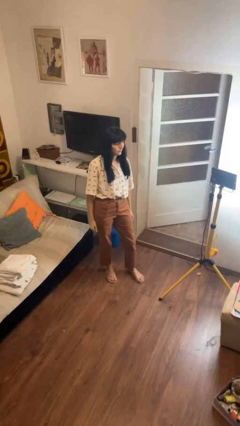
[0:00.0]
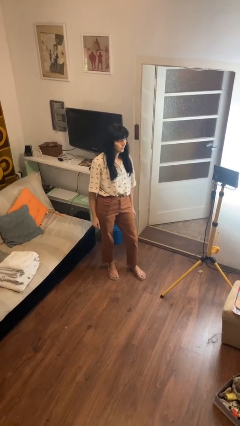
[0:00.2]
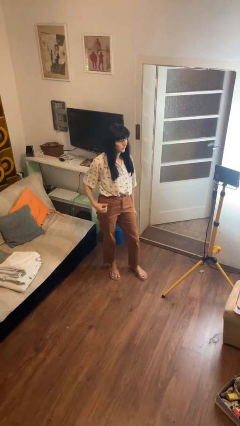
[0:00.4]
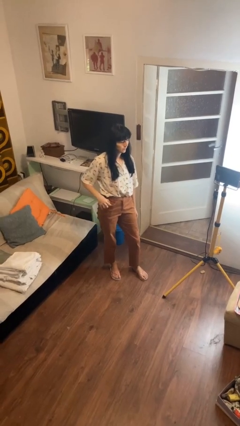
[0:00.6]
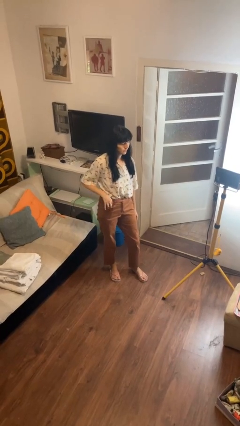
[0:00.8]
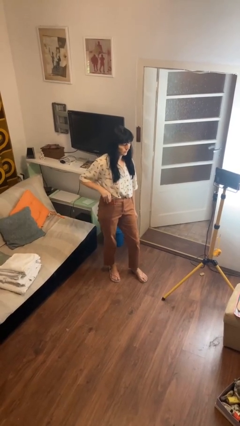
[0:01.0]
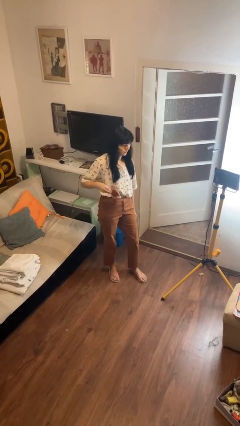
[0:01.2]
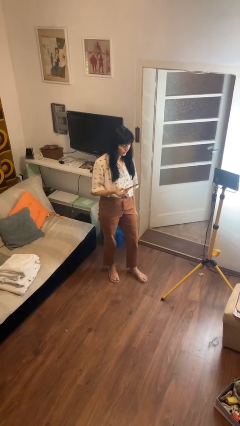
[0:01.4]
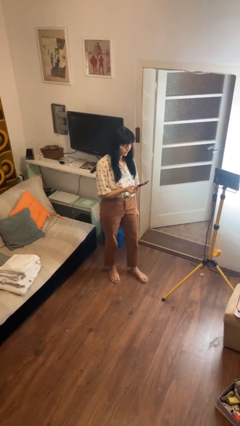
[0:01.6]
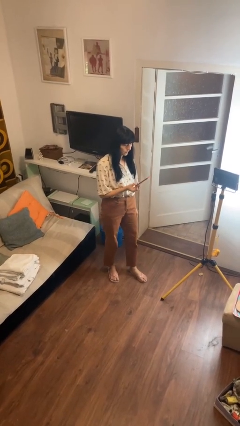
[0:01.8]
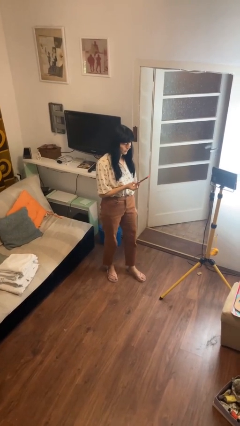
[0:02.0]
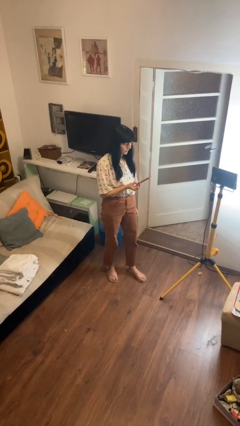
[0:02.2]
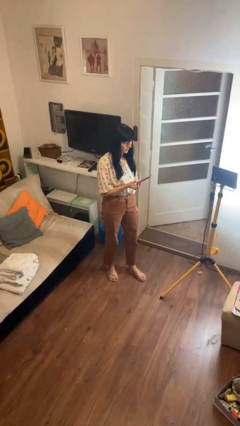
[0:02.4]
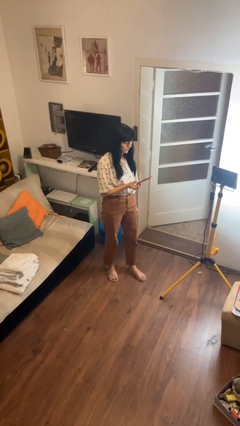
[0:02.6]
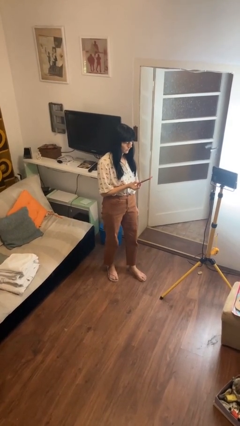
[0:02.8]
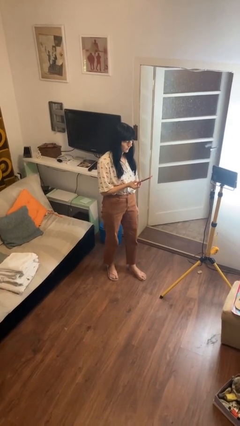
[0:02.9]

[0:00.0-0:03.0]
person takes phone from pocket

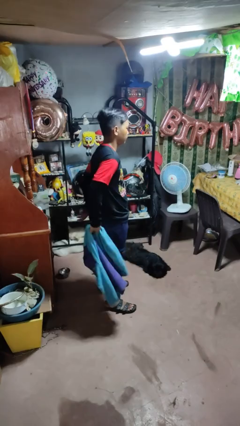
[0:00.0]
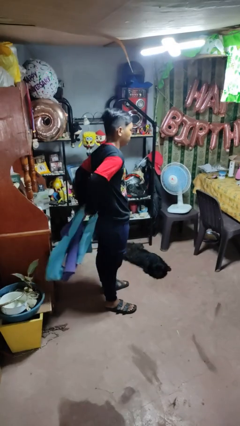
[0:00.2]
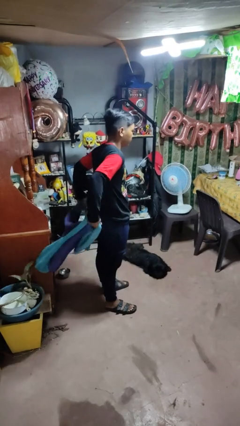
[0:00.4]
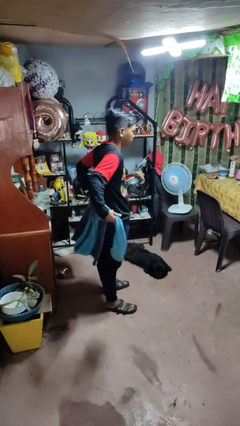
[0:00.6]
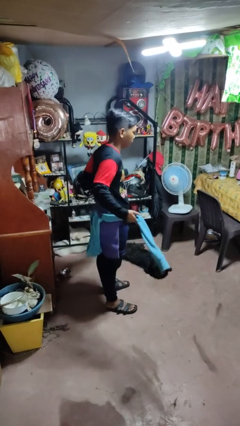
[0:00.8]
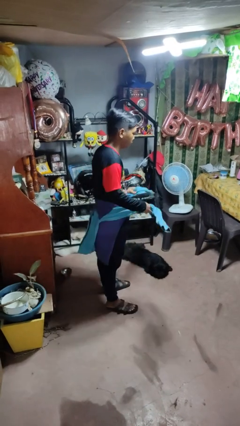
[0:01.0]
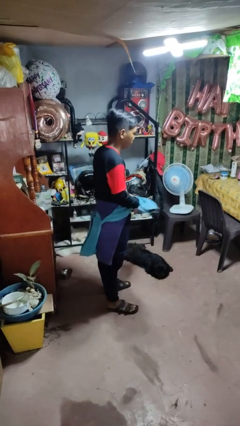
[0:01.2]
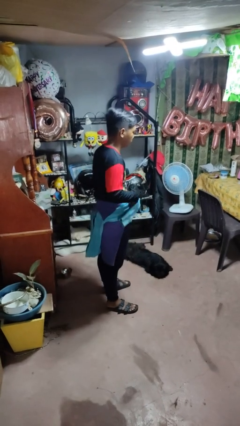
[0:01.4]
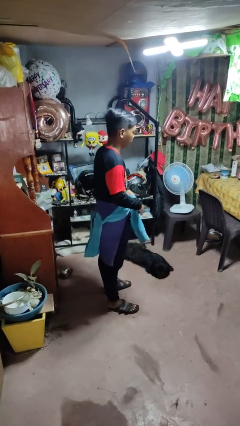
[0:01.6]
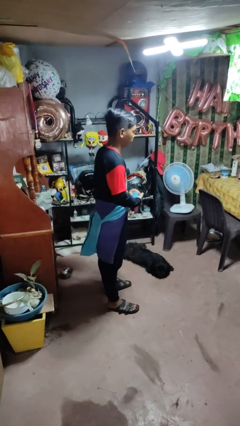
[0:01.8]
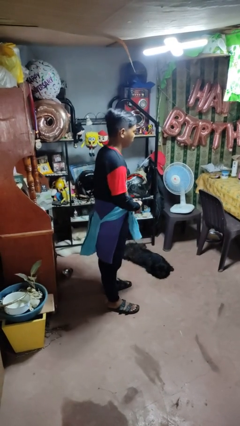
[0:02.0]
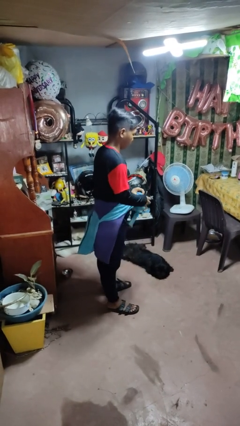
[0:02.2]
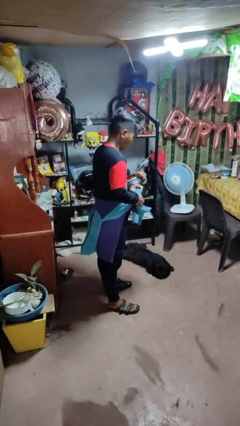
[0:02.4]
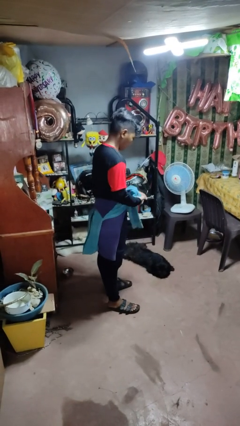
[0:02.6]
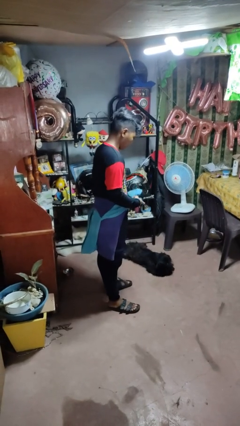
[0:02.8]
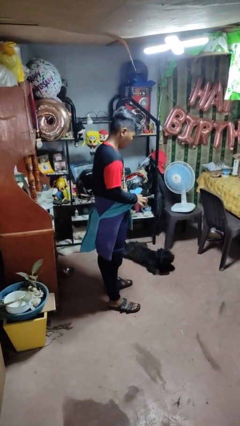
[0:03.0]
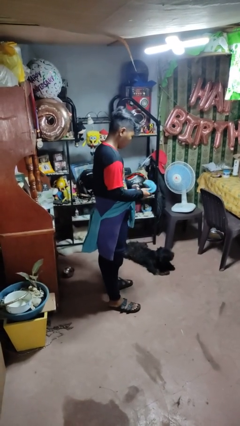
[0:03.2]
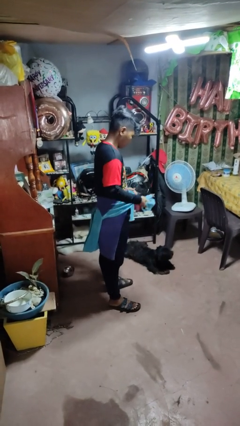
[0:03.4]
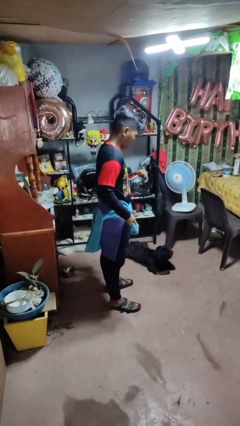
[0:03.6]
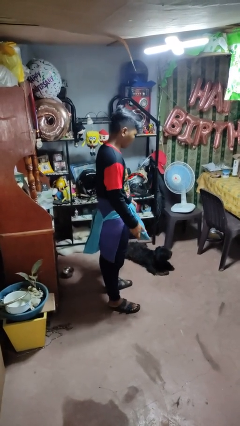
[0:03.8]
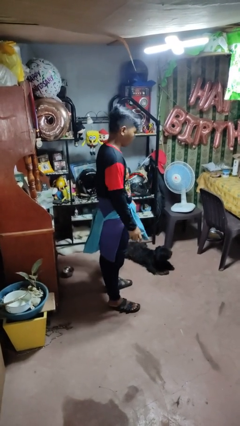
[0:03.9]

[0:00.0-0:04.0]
person ties jacket around waist

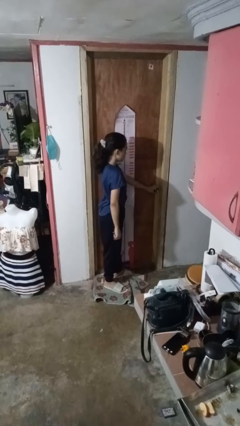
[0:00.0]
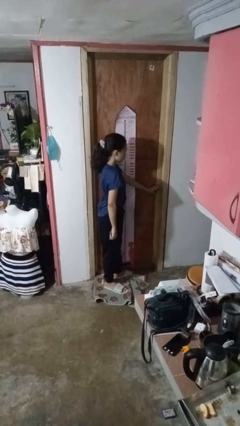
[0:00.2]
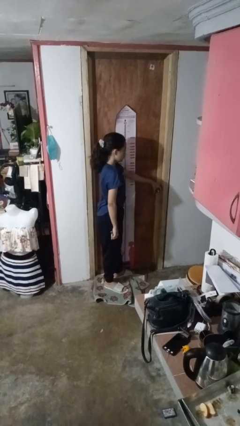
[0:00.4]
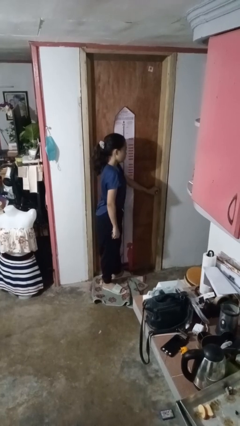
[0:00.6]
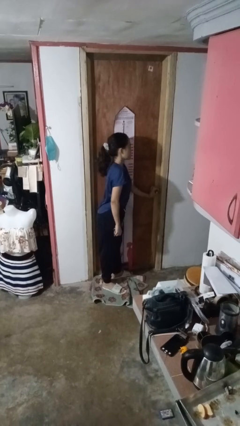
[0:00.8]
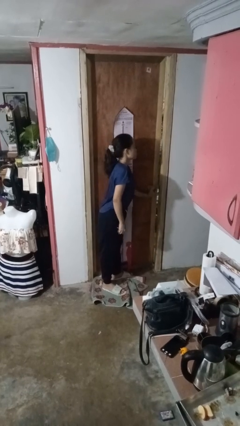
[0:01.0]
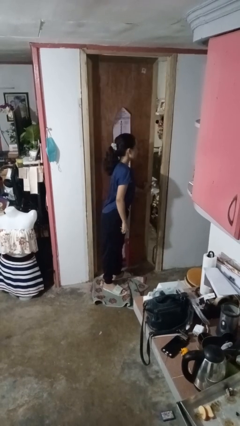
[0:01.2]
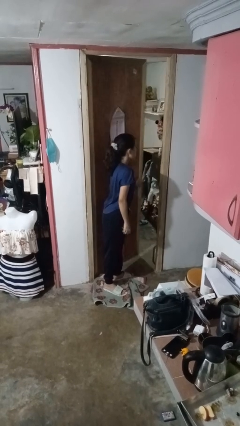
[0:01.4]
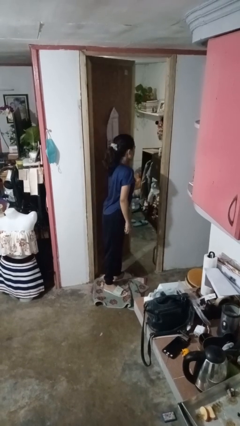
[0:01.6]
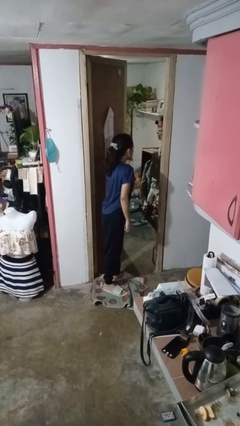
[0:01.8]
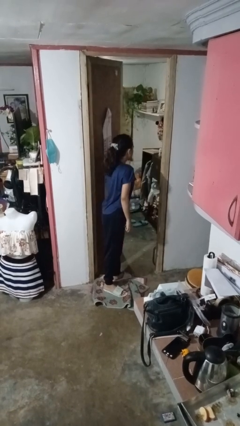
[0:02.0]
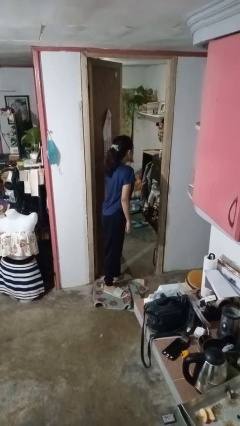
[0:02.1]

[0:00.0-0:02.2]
person opens facility door

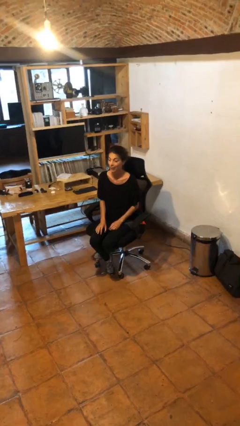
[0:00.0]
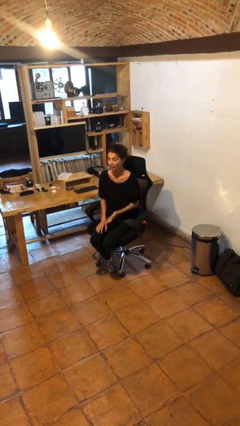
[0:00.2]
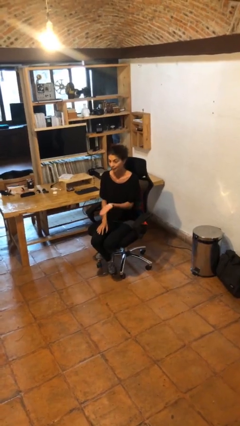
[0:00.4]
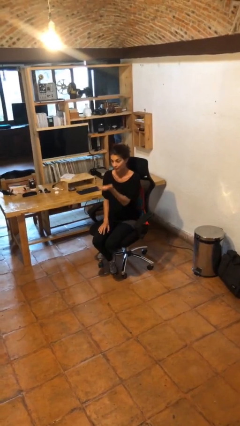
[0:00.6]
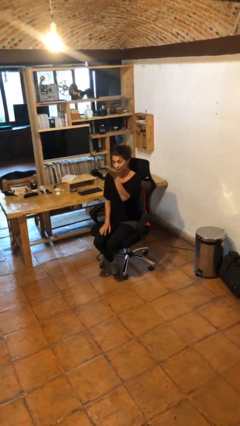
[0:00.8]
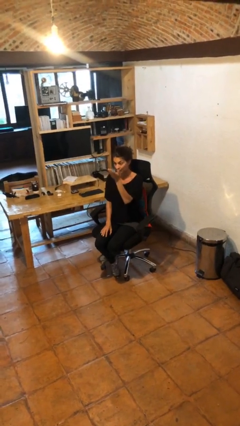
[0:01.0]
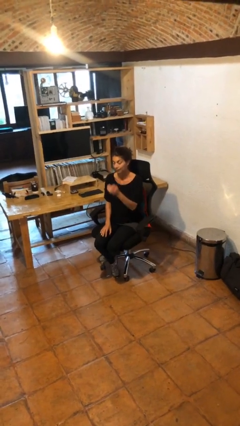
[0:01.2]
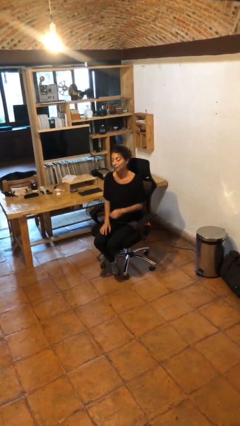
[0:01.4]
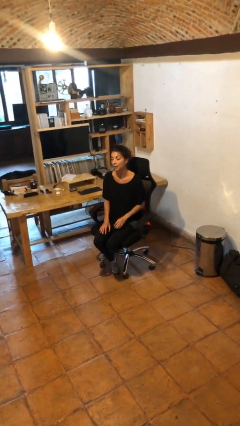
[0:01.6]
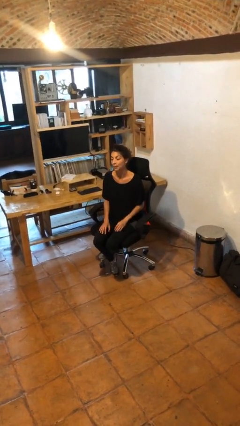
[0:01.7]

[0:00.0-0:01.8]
person gestures swipe up

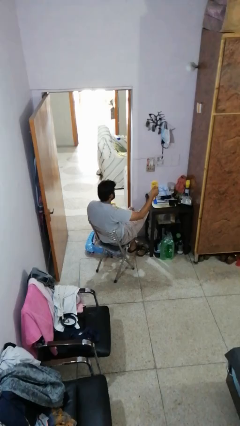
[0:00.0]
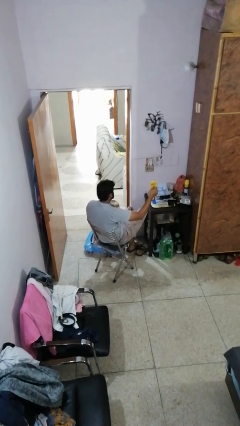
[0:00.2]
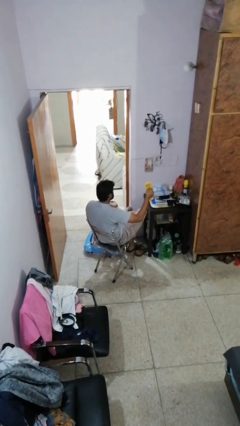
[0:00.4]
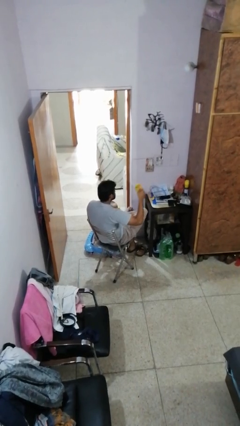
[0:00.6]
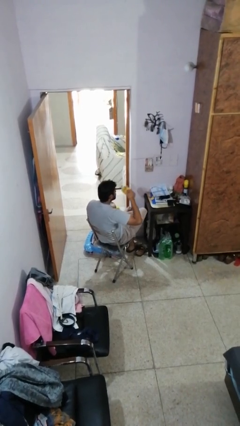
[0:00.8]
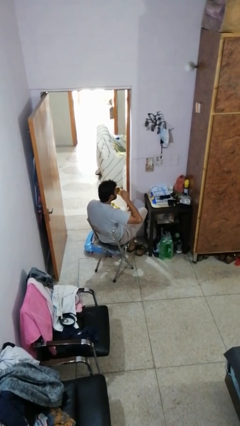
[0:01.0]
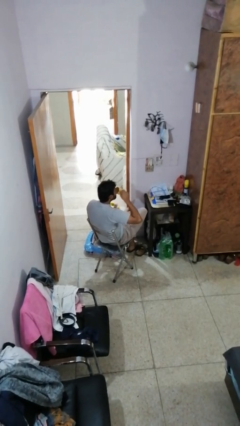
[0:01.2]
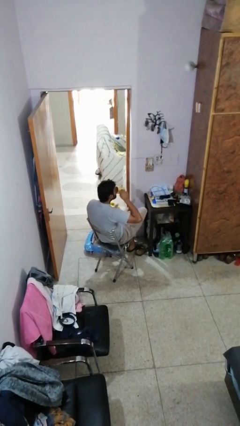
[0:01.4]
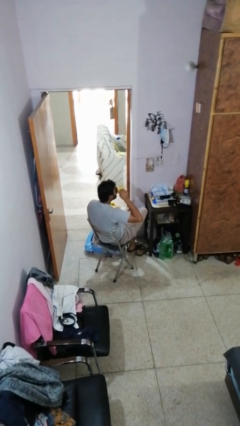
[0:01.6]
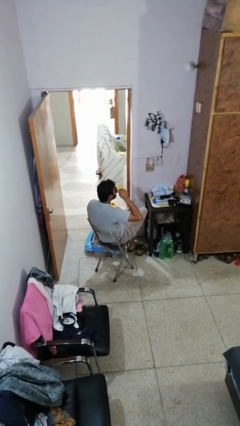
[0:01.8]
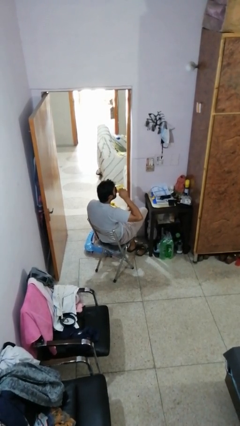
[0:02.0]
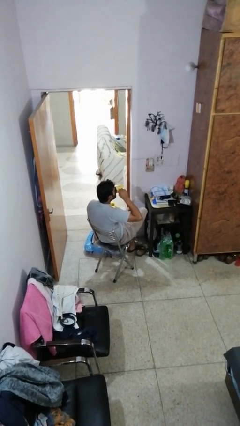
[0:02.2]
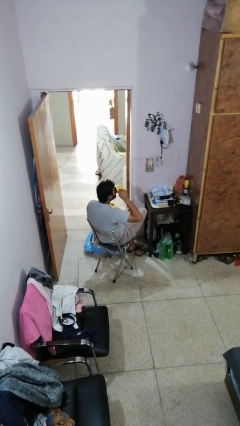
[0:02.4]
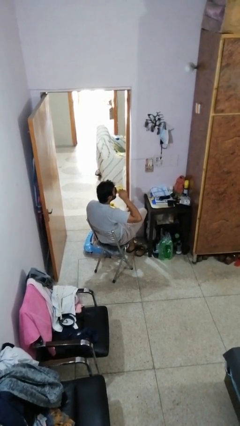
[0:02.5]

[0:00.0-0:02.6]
person drinks from mug

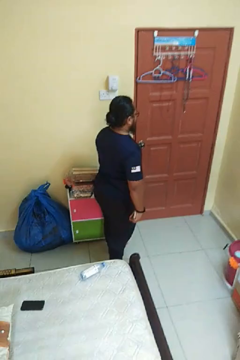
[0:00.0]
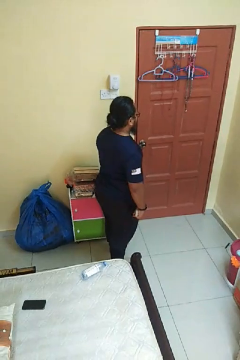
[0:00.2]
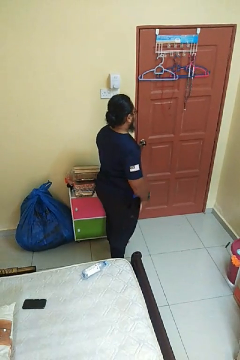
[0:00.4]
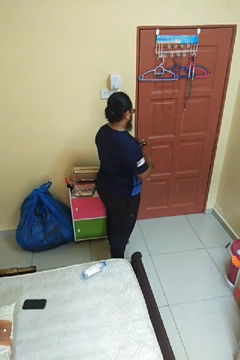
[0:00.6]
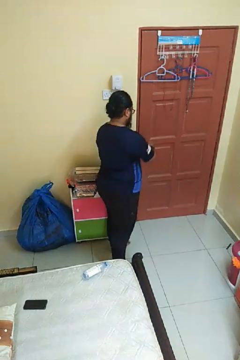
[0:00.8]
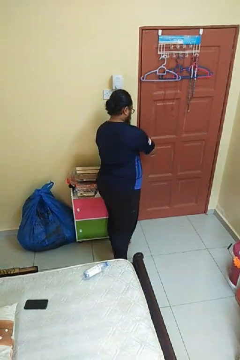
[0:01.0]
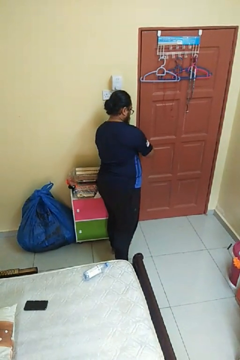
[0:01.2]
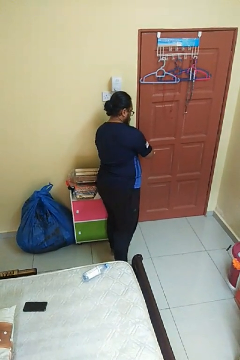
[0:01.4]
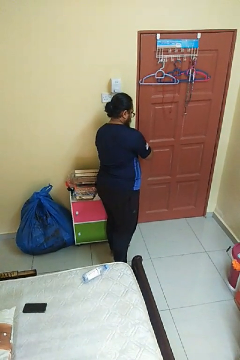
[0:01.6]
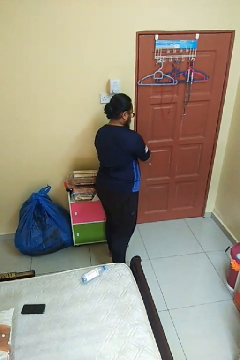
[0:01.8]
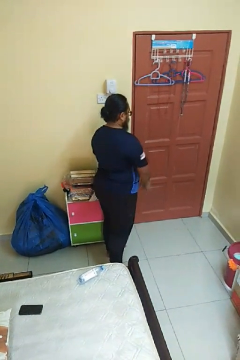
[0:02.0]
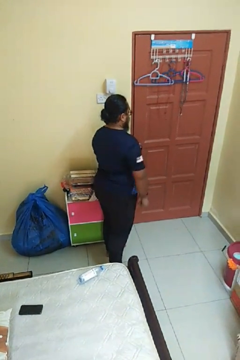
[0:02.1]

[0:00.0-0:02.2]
person unlocks door with keys

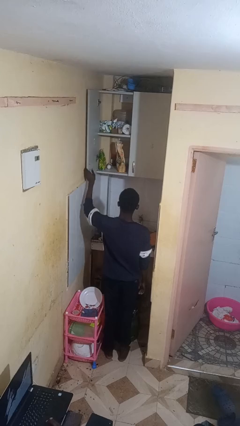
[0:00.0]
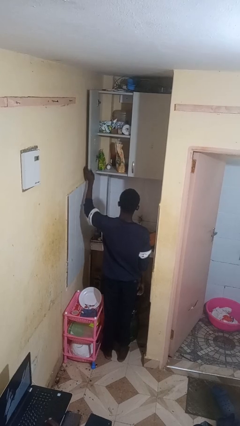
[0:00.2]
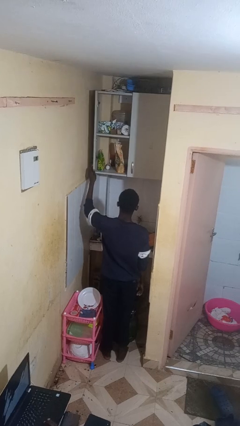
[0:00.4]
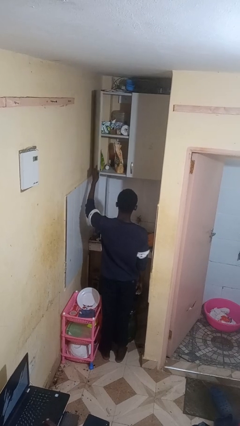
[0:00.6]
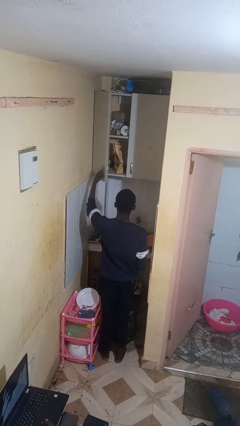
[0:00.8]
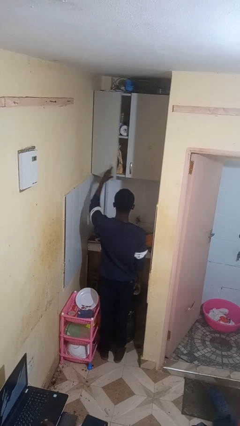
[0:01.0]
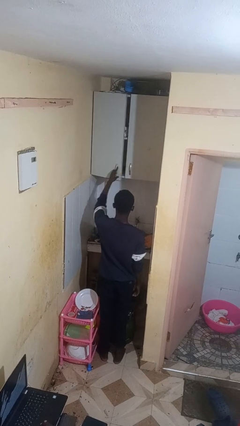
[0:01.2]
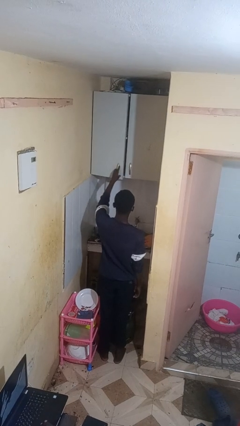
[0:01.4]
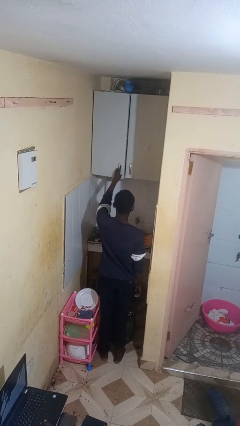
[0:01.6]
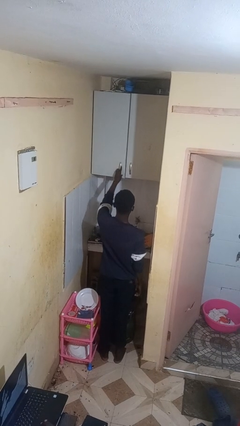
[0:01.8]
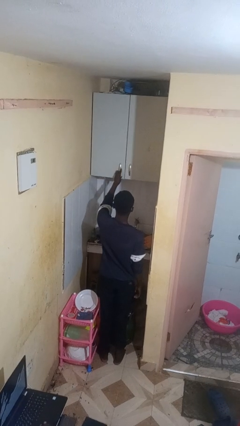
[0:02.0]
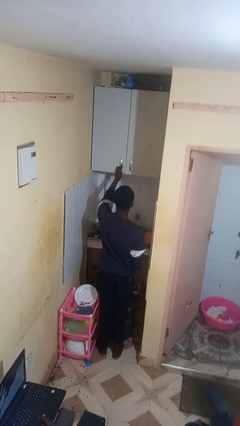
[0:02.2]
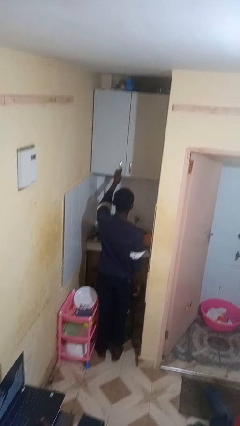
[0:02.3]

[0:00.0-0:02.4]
person closes cabinet
